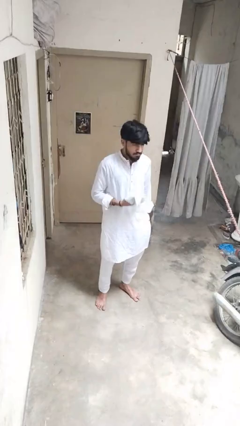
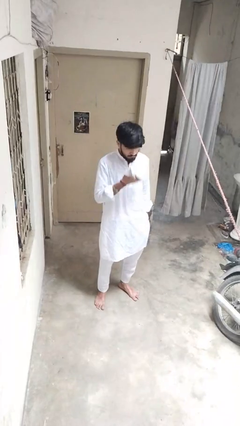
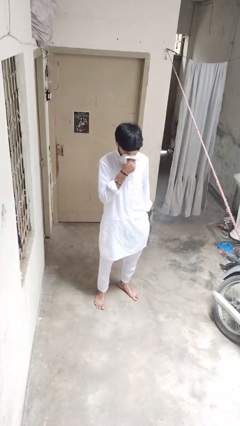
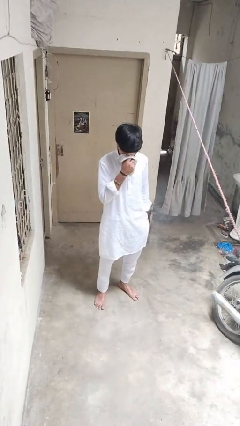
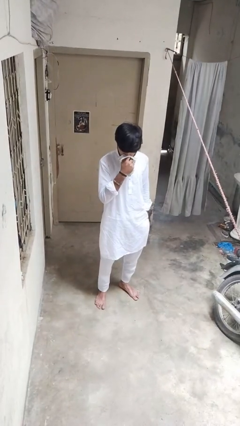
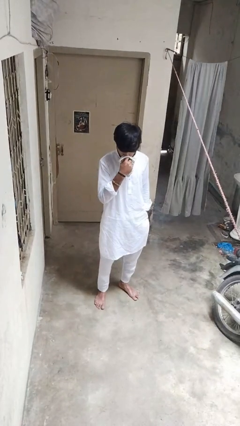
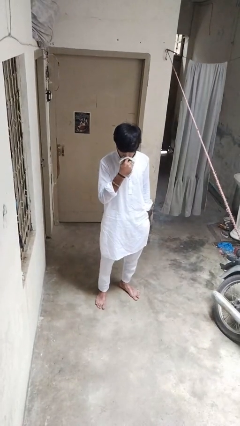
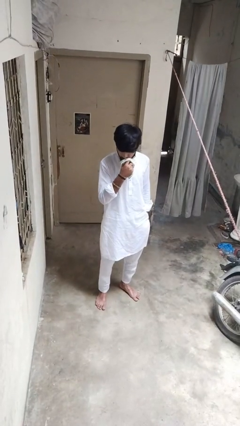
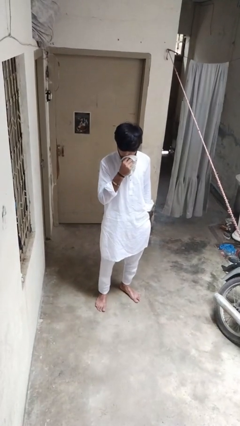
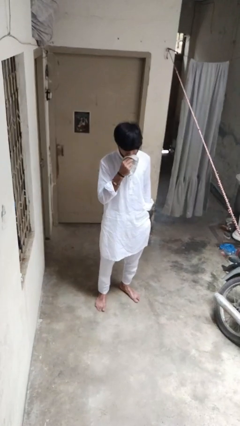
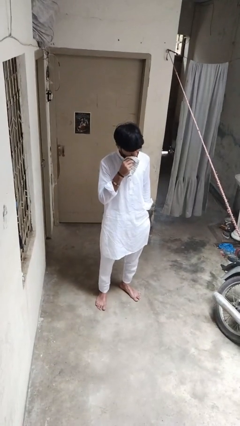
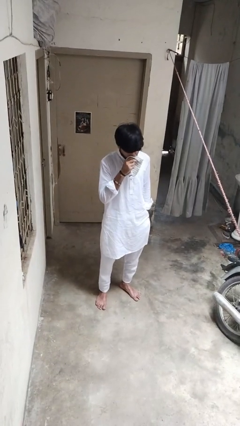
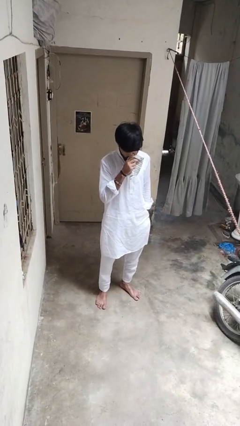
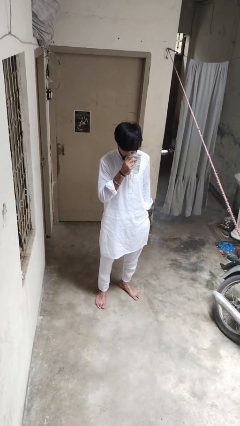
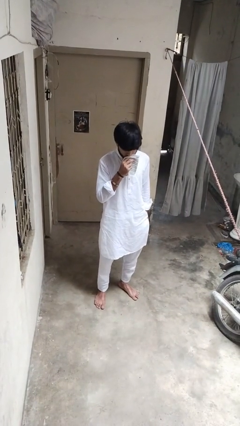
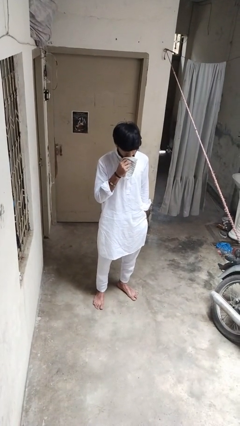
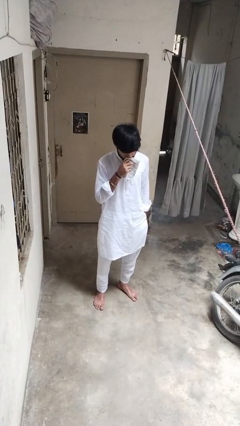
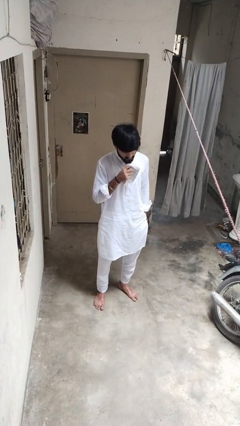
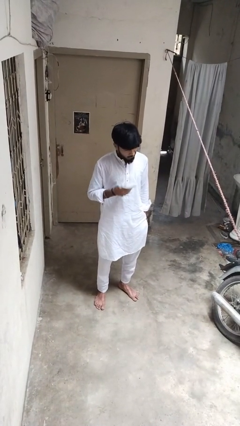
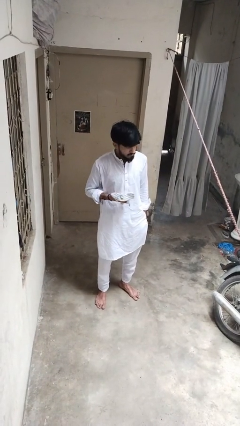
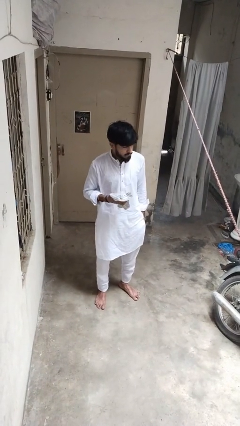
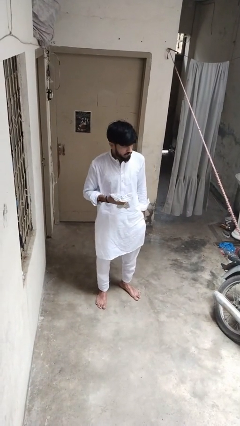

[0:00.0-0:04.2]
person blows nose

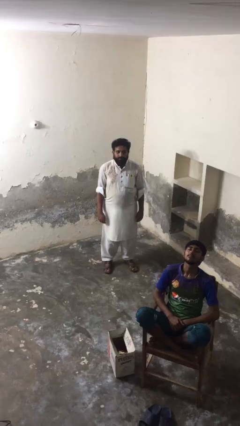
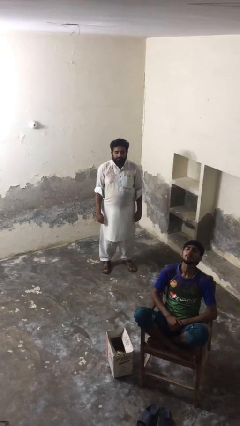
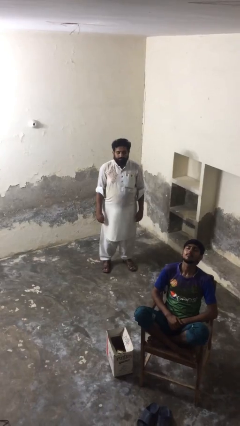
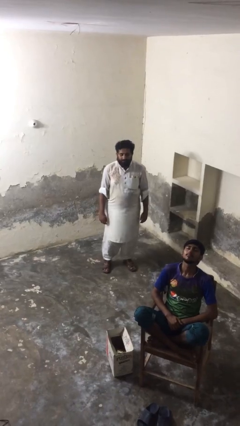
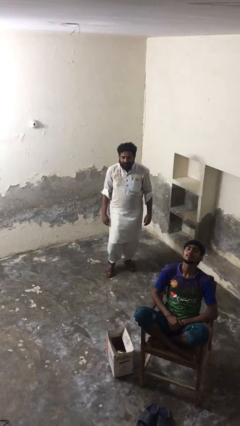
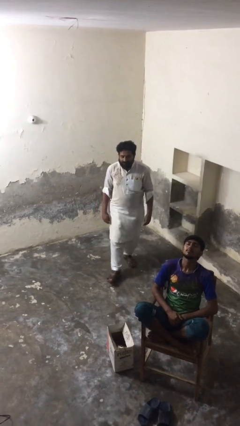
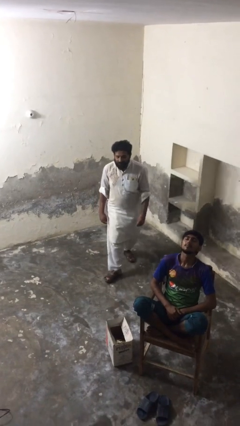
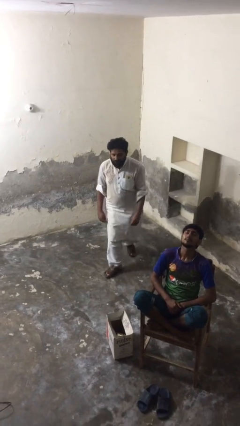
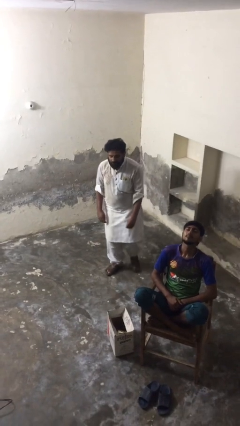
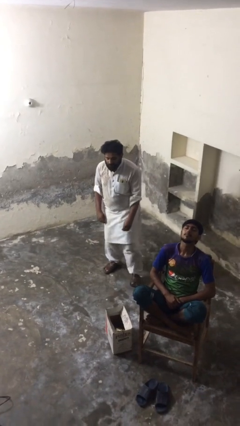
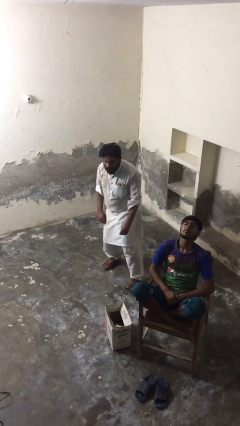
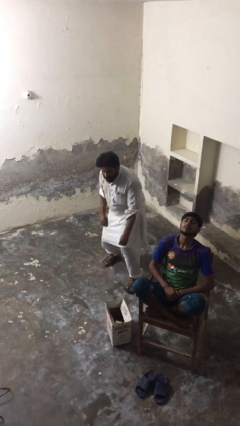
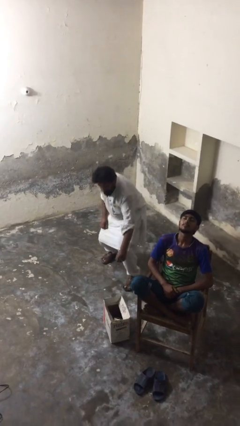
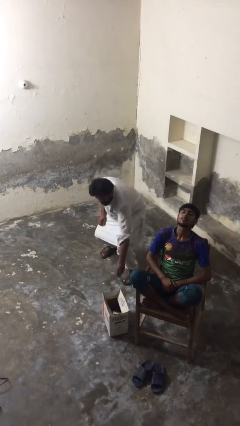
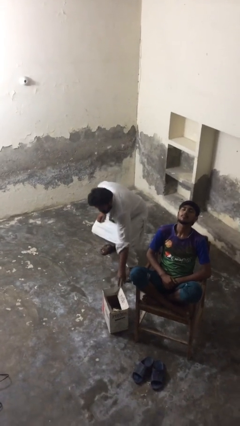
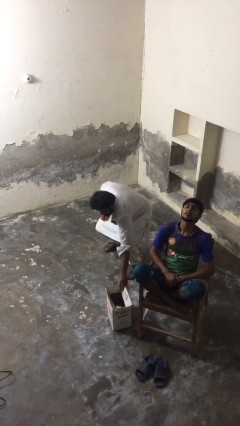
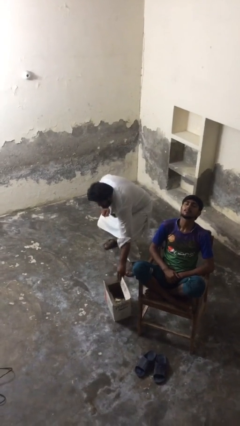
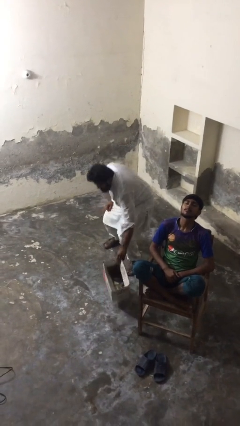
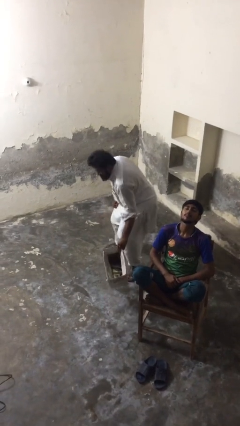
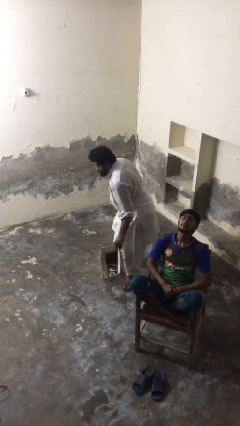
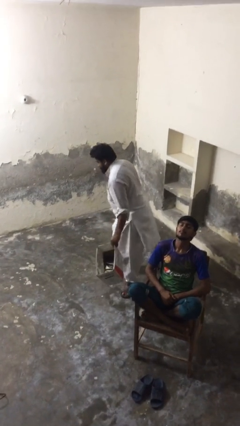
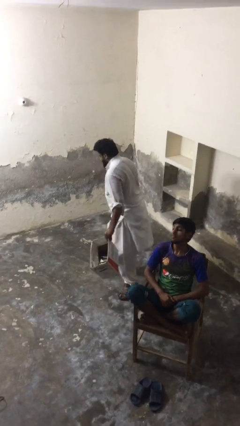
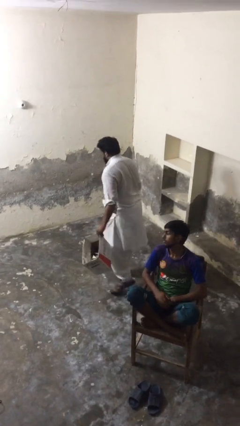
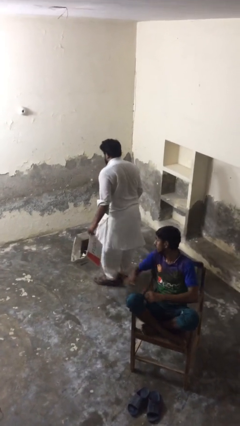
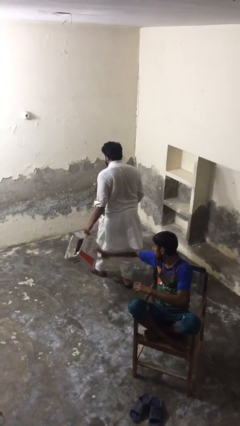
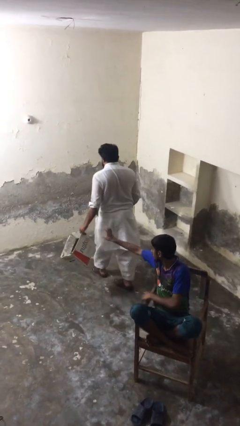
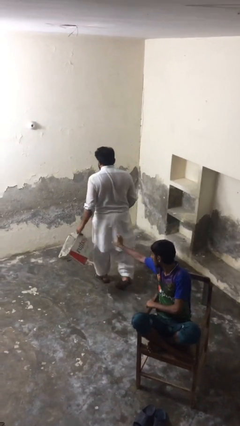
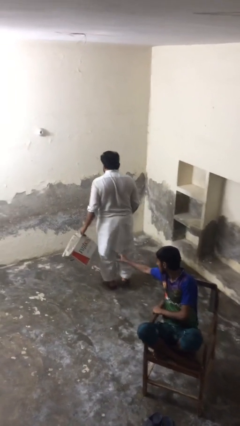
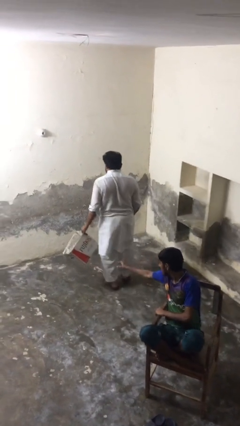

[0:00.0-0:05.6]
person steals object from person

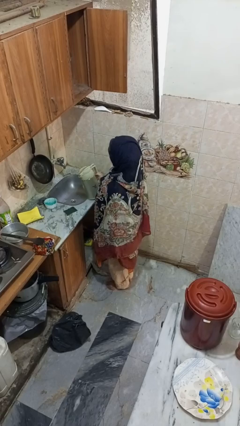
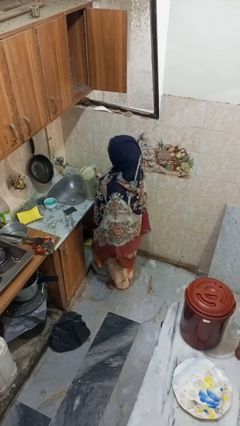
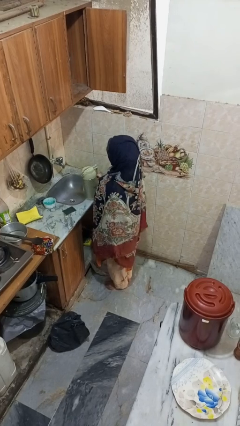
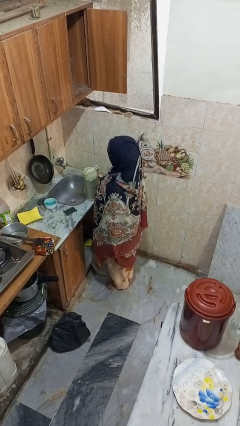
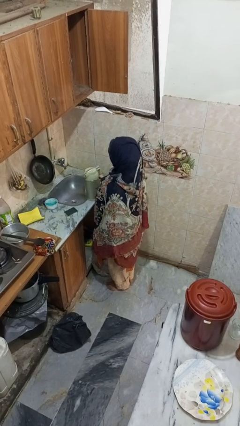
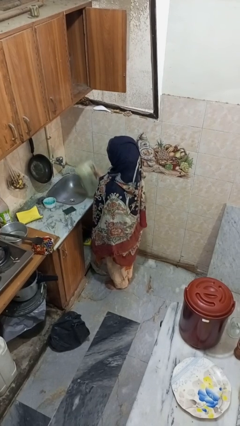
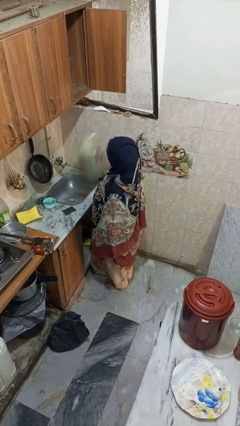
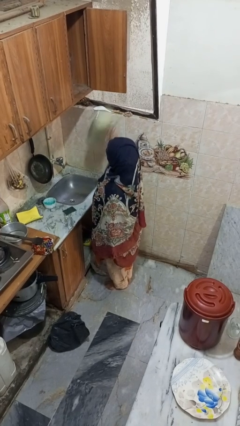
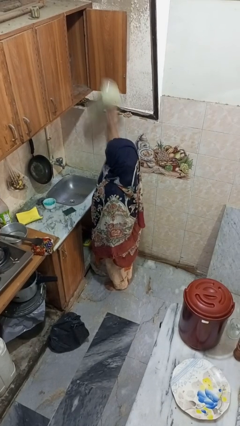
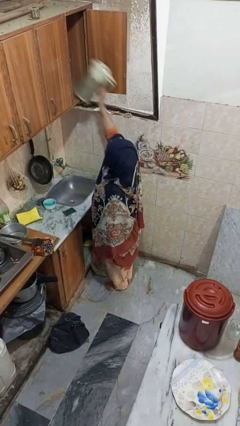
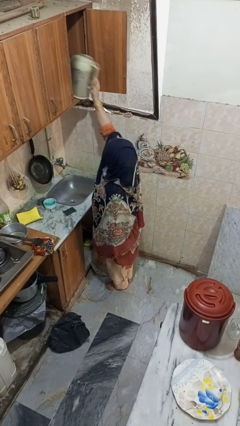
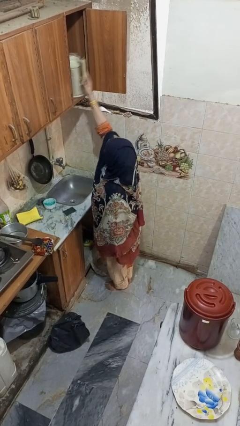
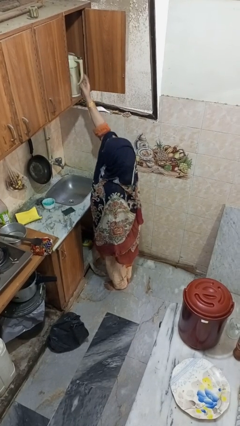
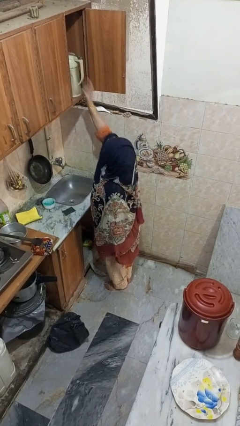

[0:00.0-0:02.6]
person takes object from cabinet

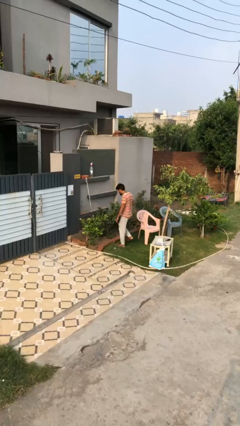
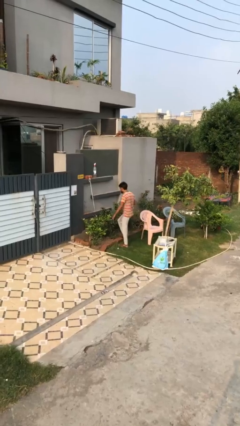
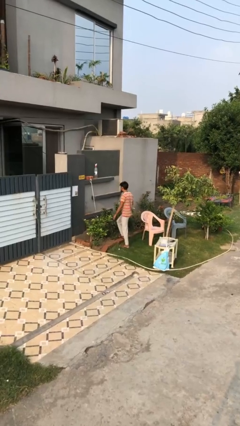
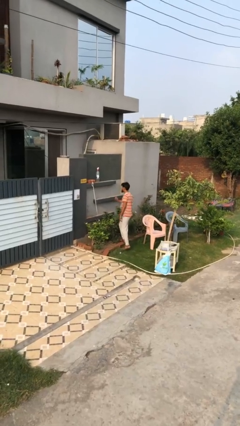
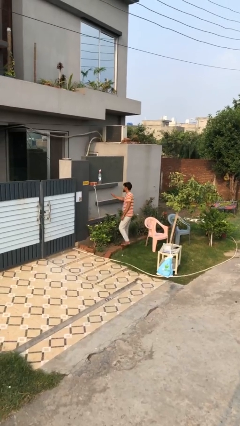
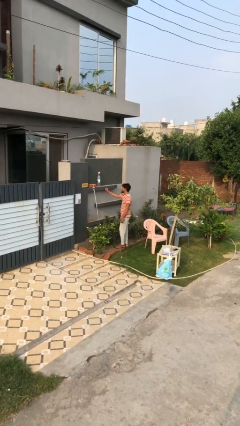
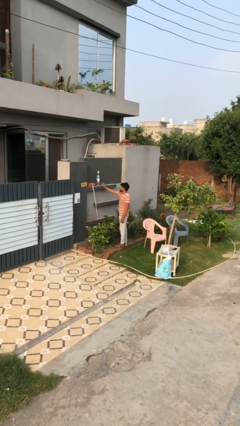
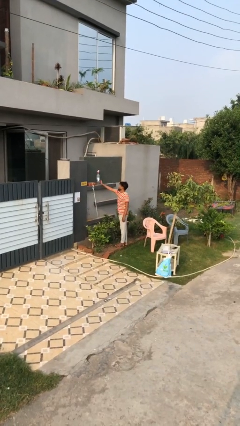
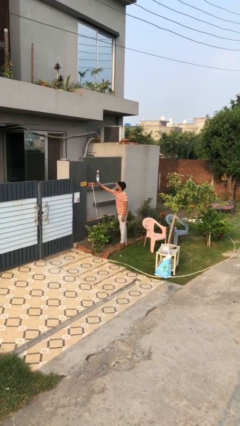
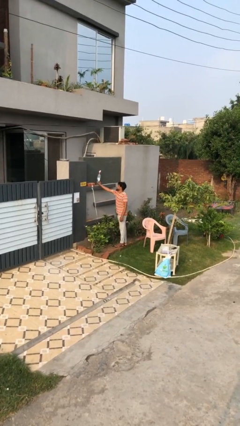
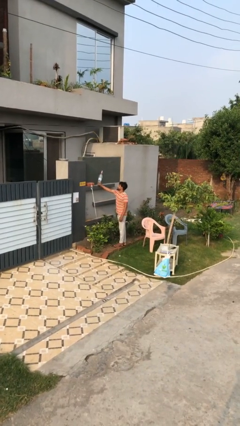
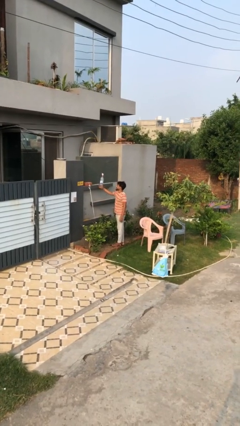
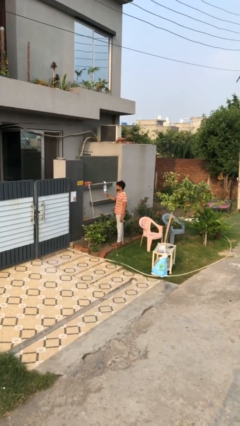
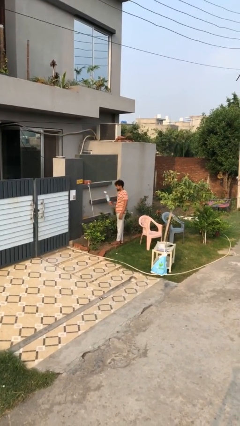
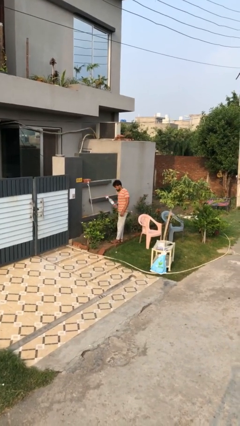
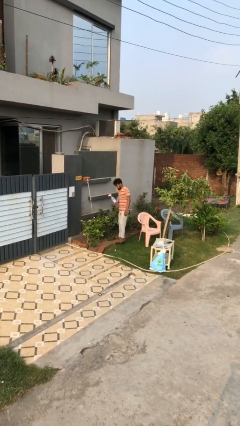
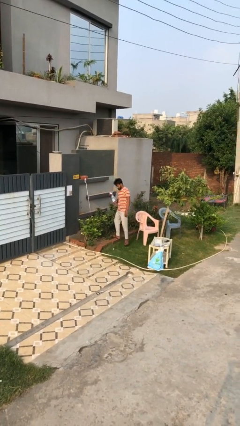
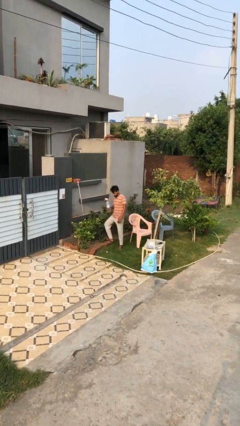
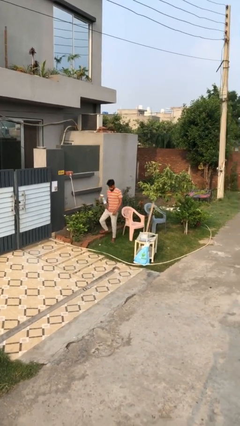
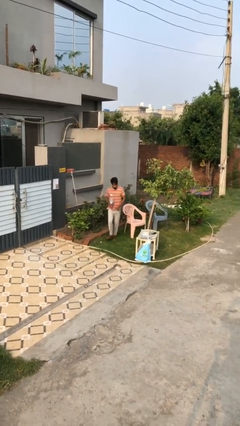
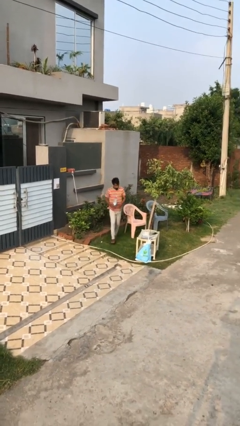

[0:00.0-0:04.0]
person picks up object from shelf

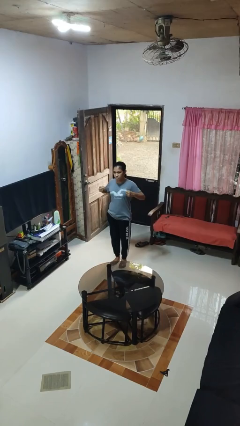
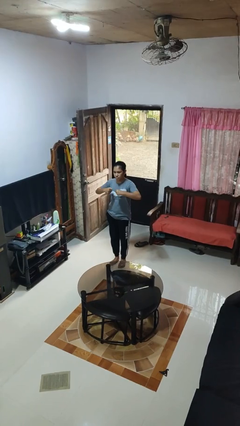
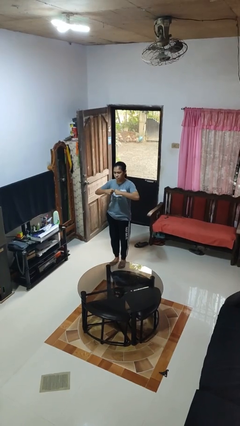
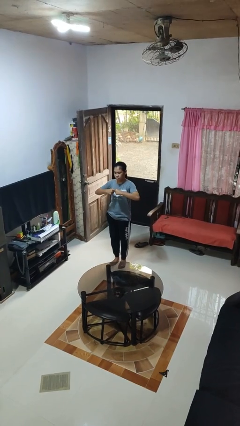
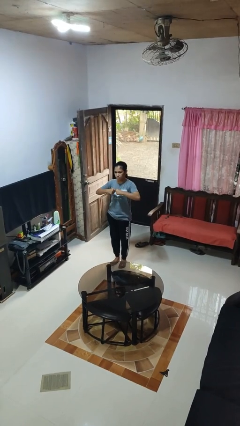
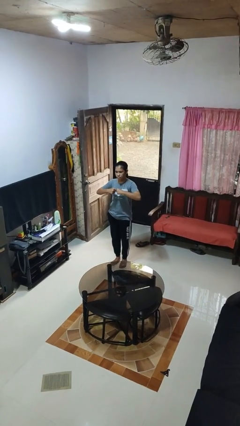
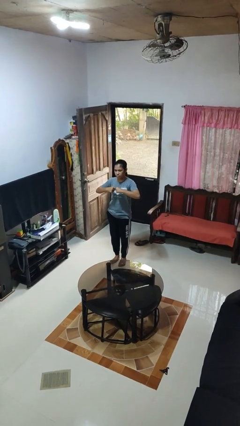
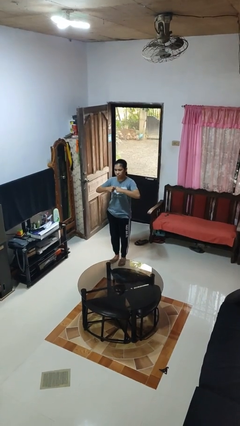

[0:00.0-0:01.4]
person gestures zoom out
